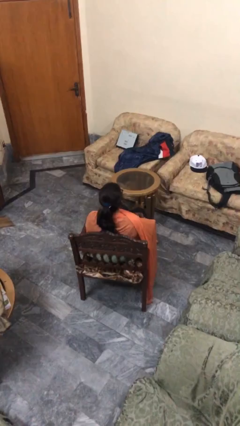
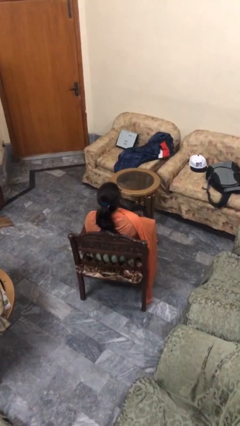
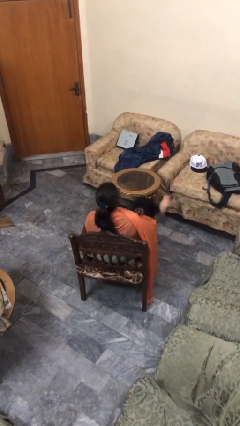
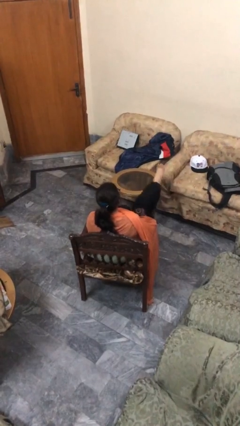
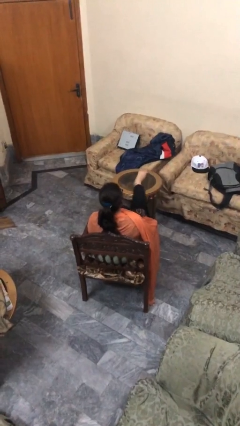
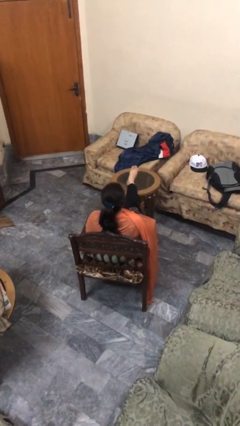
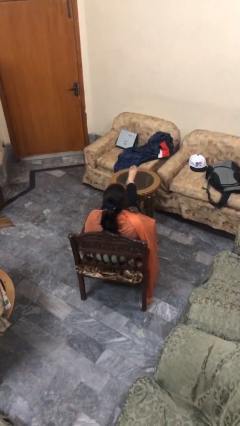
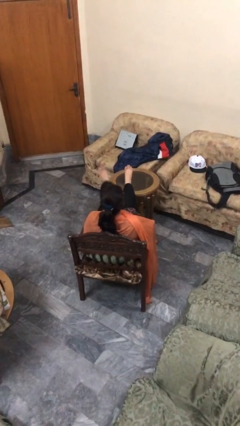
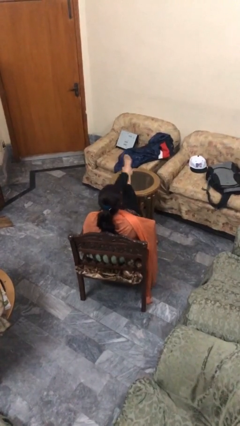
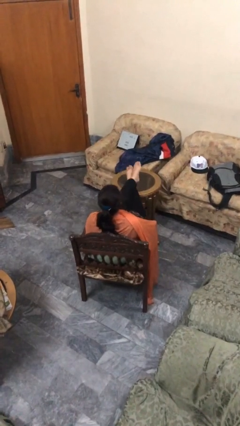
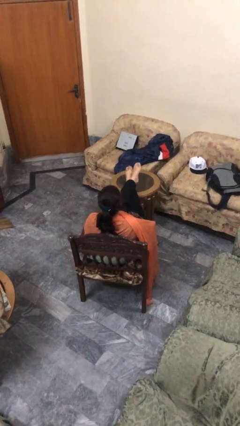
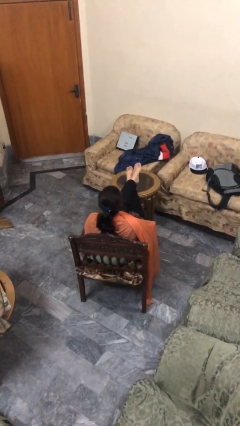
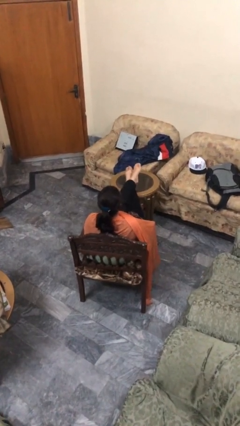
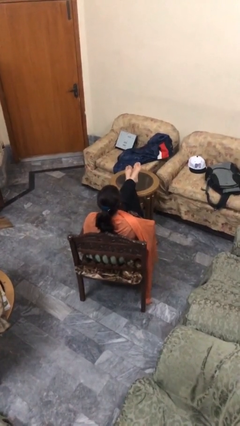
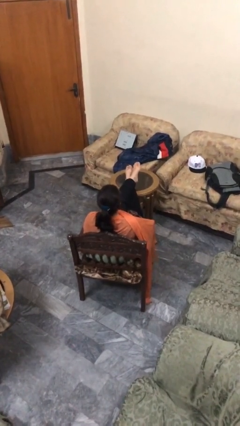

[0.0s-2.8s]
person puts feet up

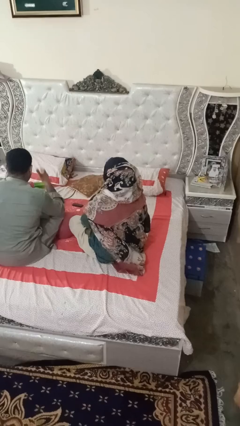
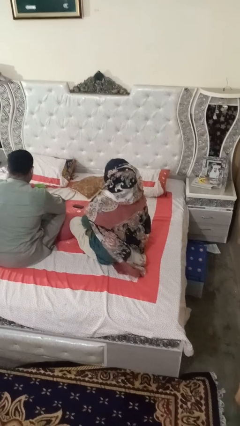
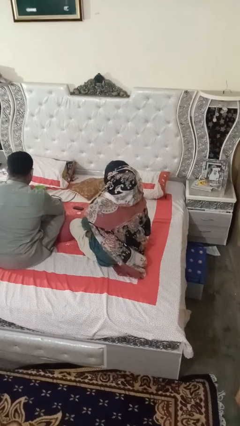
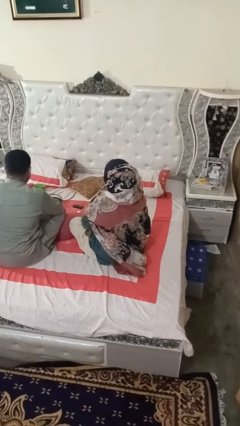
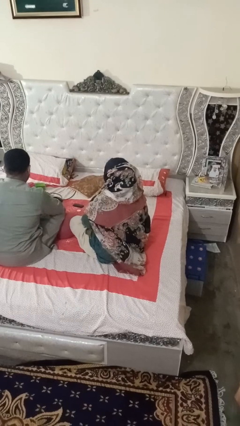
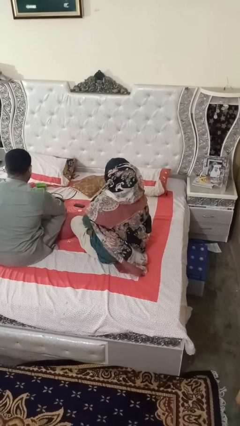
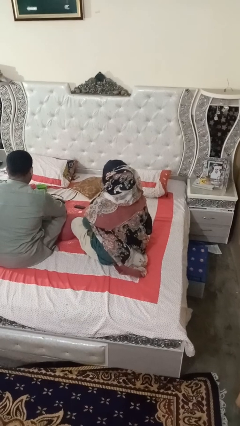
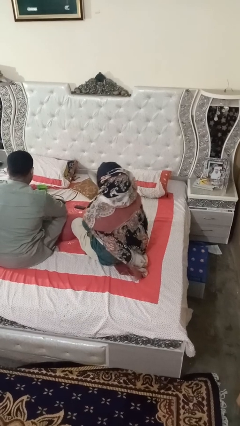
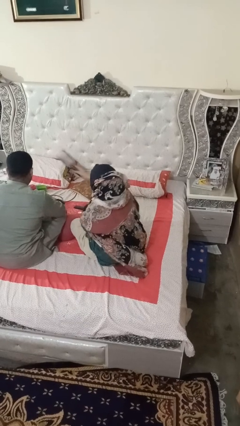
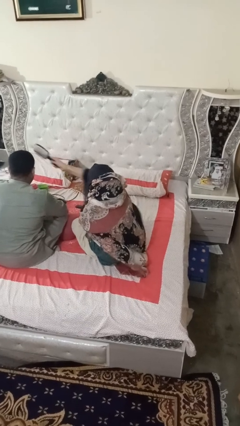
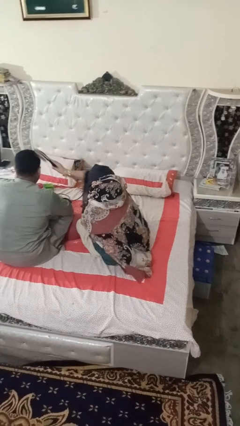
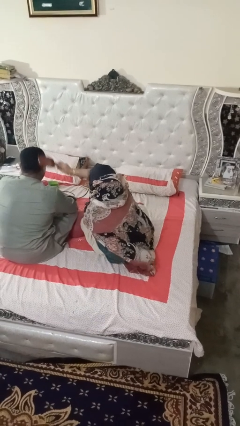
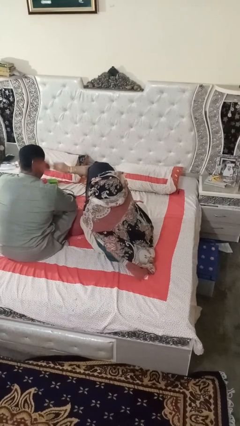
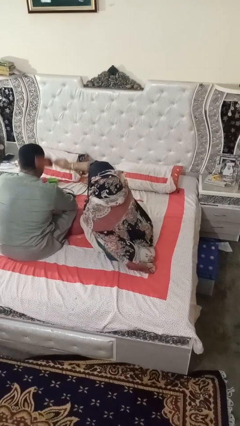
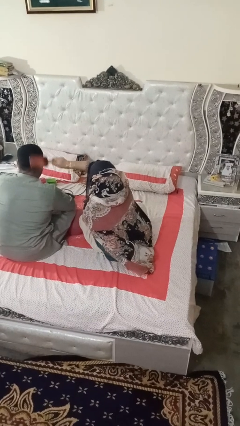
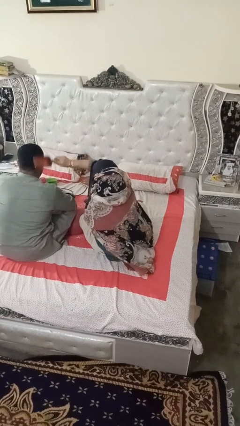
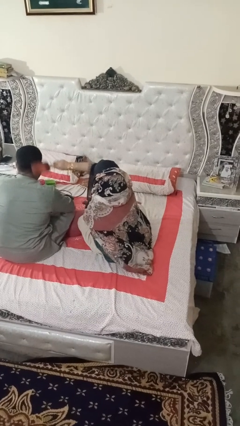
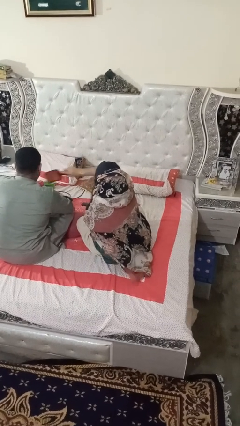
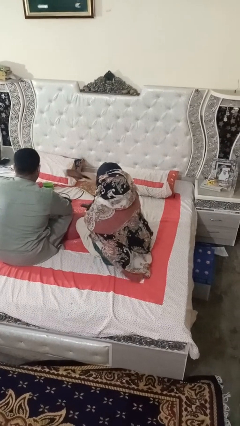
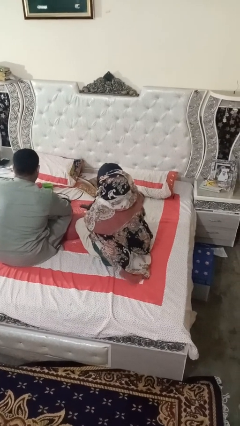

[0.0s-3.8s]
person brushes hair of person

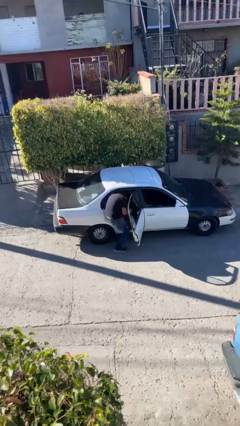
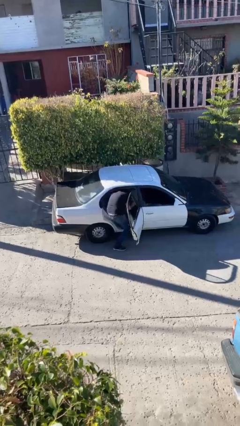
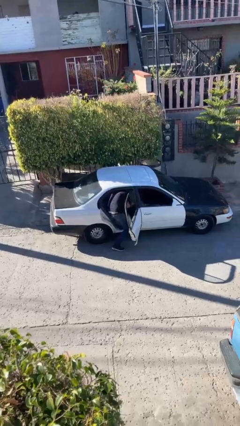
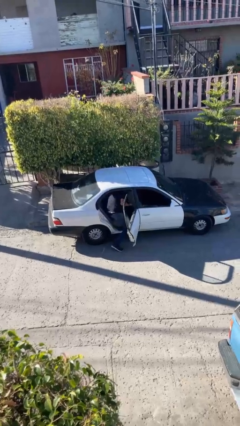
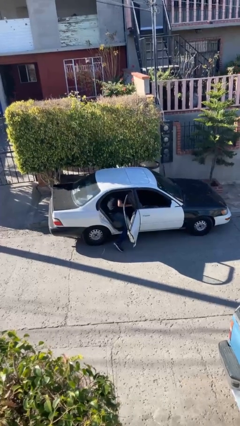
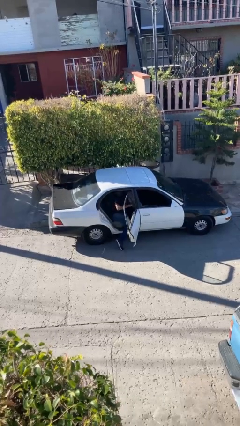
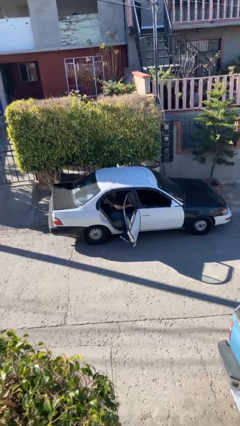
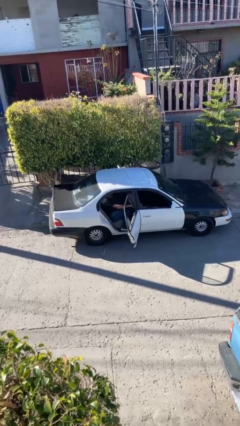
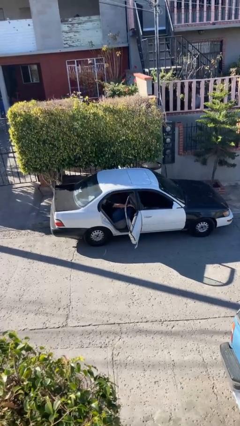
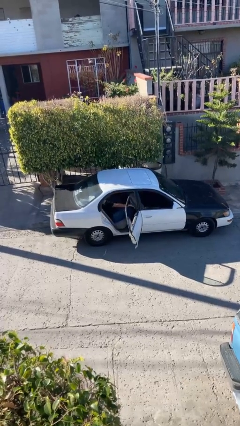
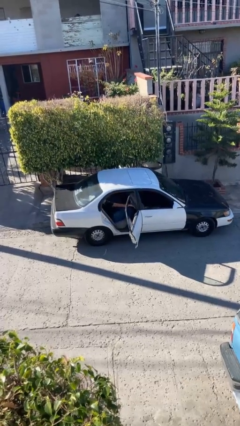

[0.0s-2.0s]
person enters car

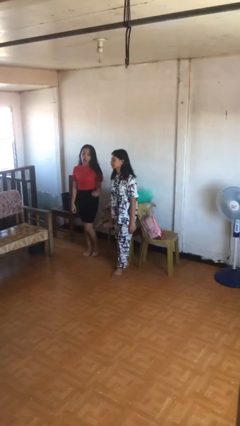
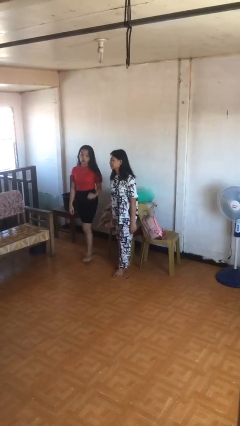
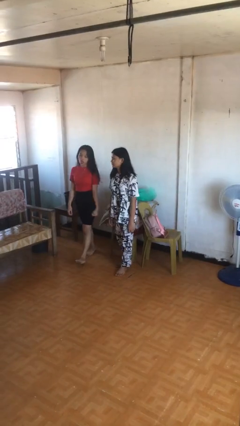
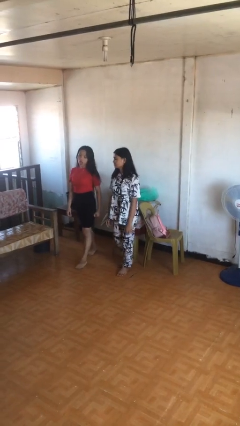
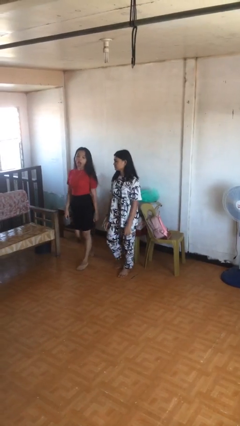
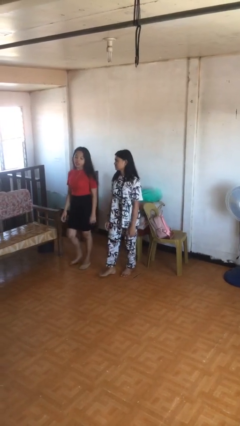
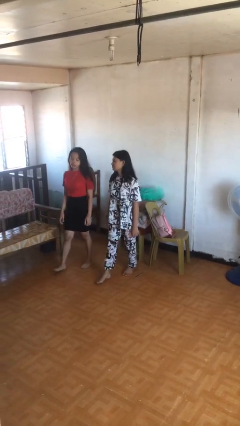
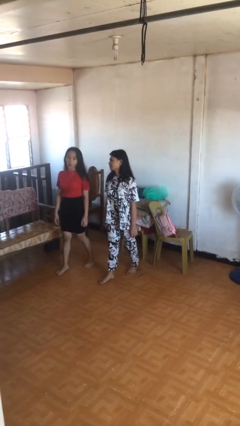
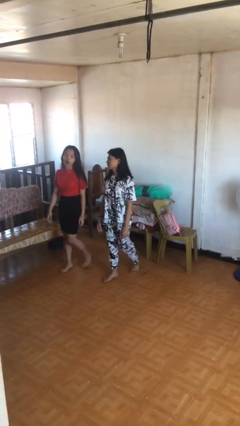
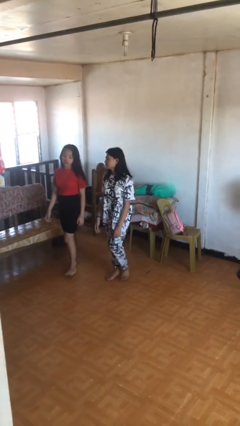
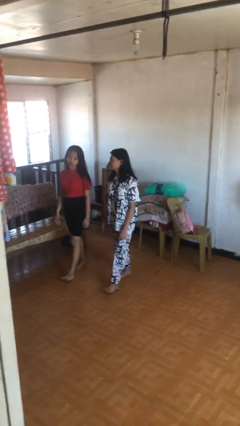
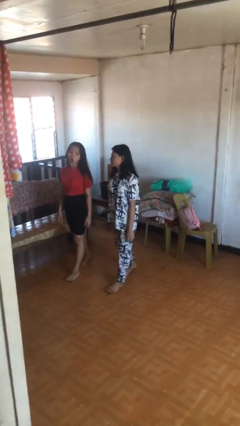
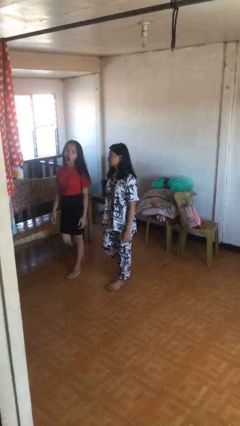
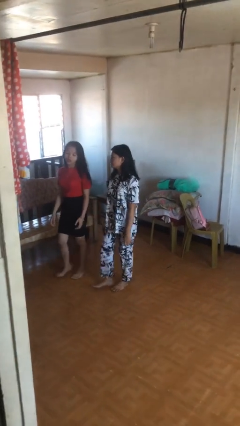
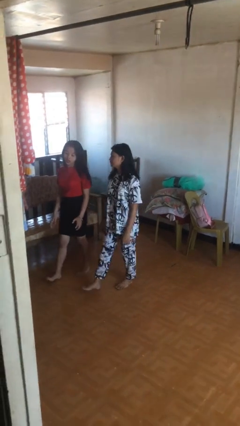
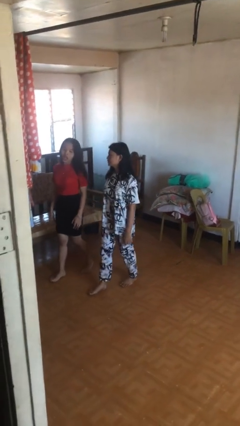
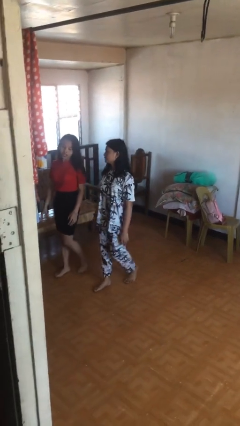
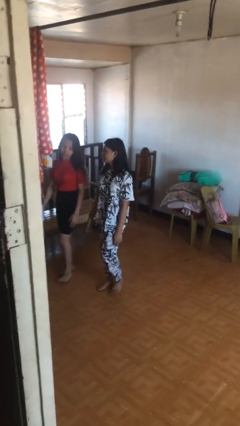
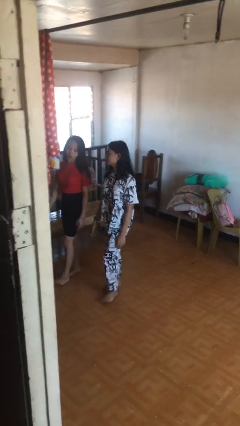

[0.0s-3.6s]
person talks to person

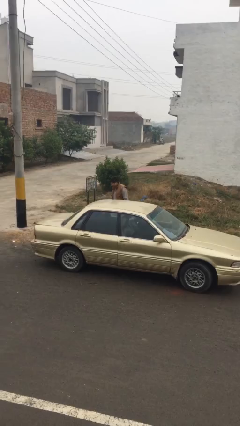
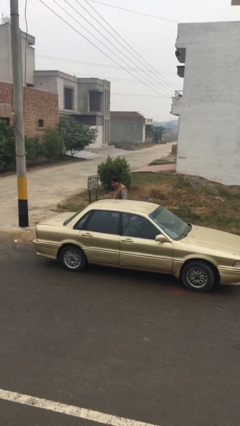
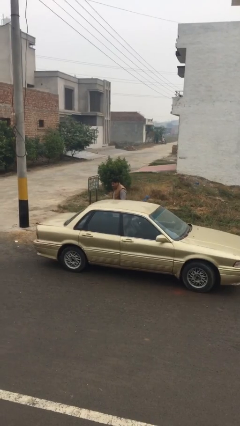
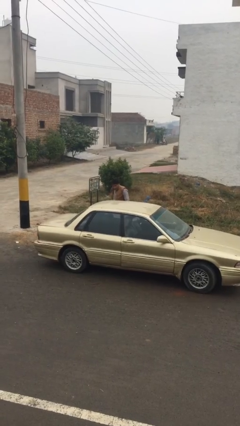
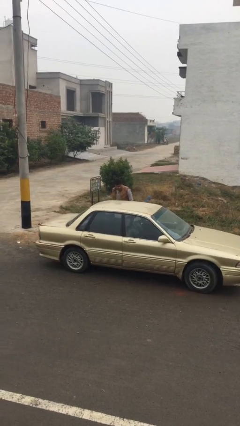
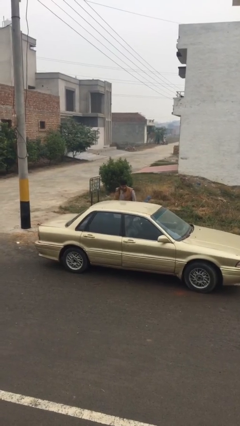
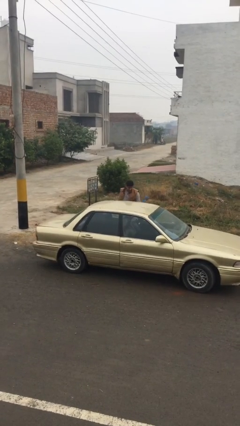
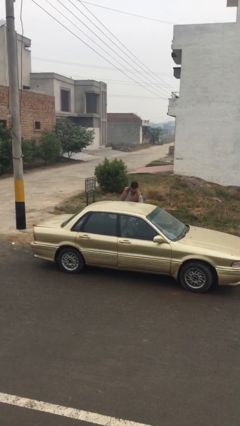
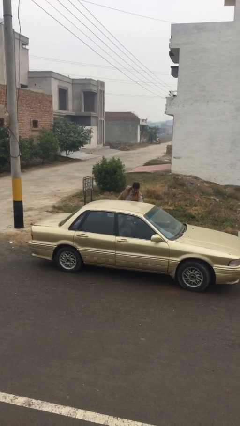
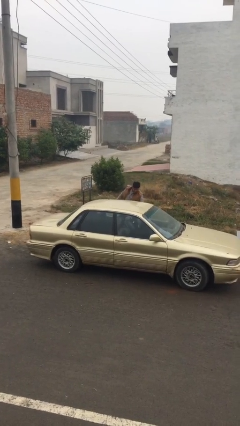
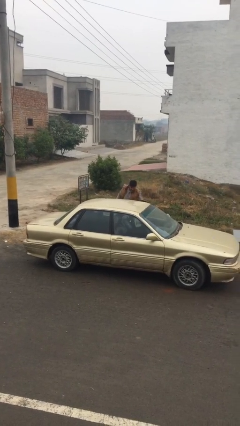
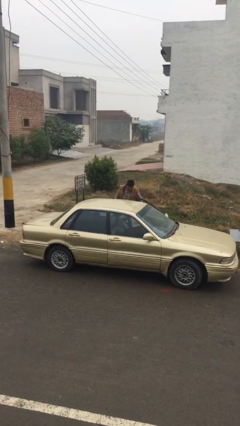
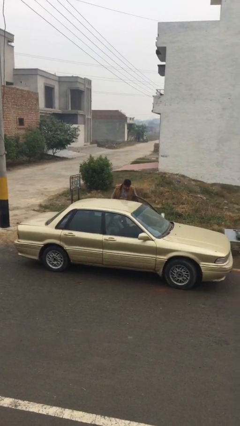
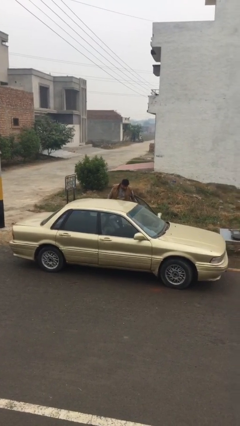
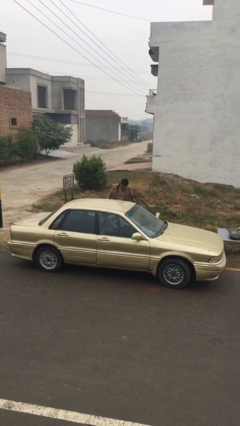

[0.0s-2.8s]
person opens car door

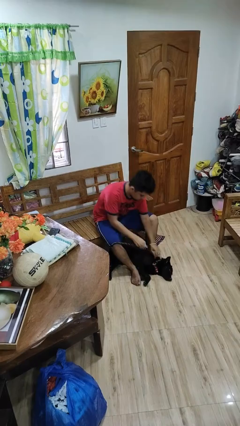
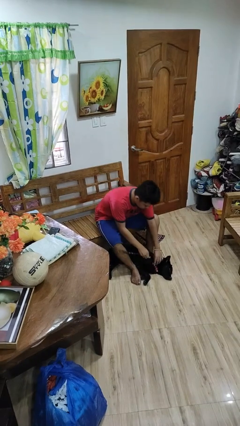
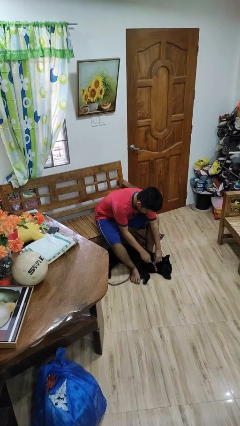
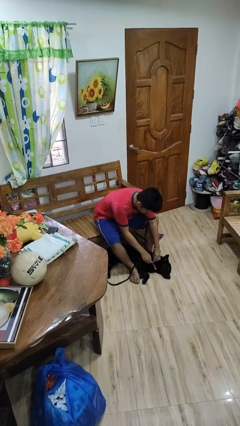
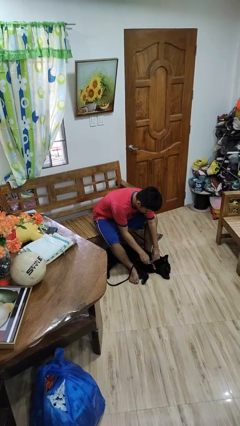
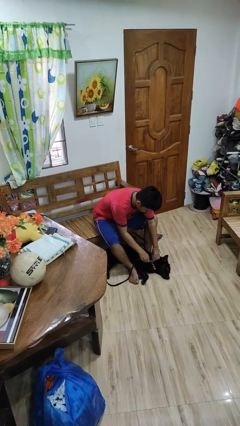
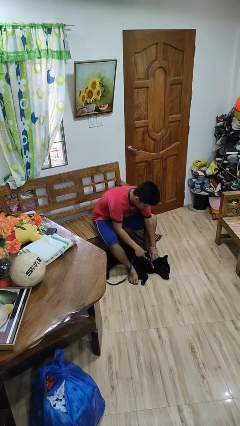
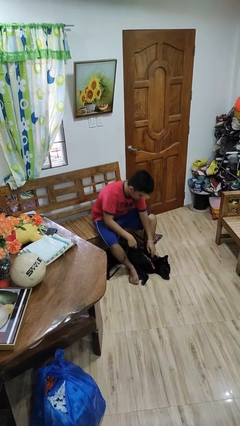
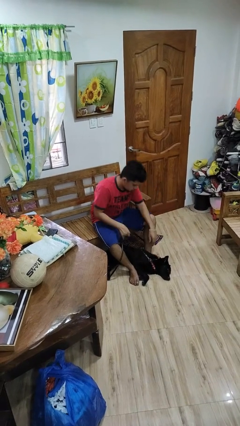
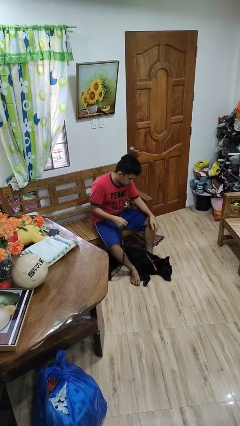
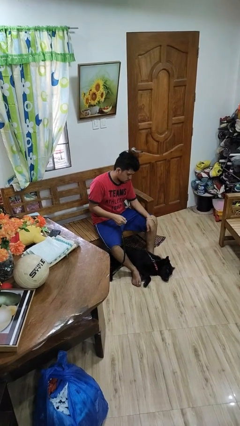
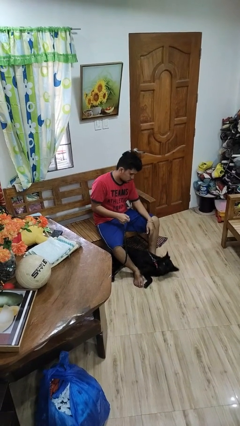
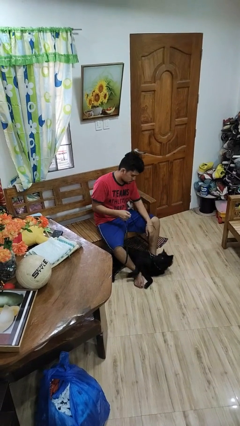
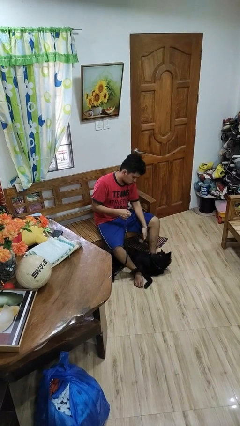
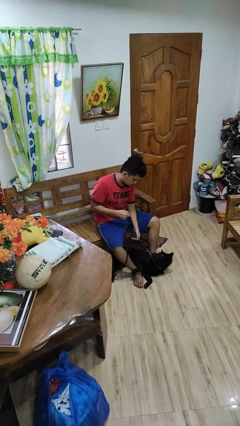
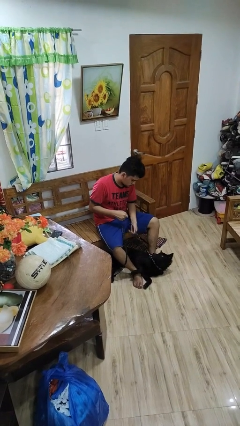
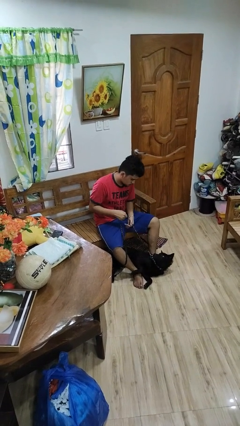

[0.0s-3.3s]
person attaches leash to dog
